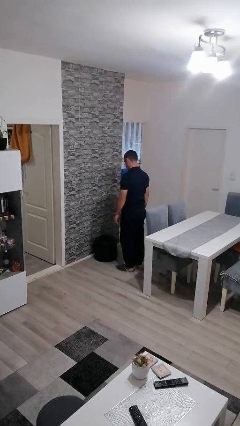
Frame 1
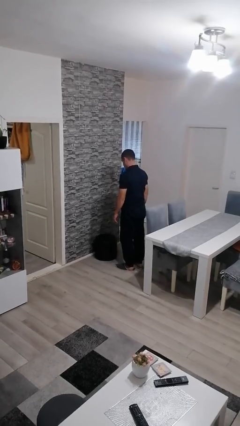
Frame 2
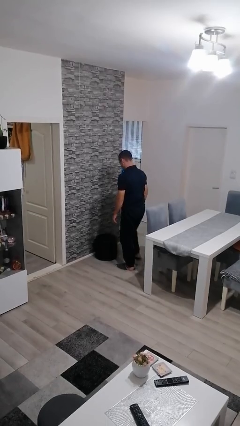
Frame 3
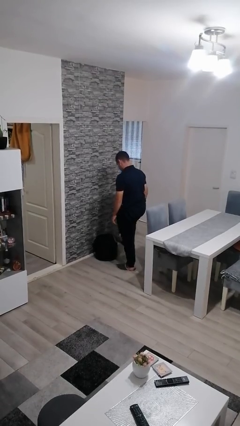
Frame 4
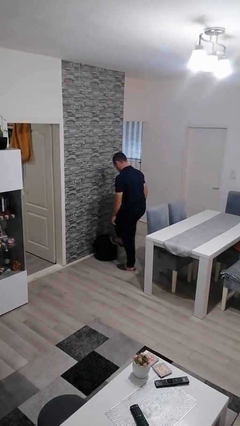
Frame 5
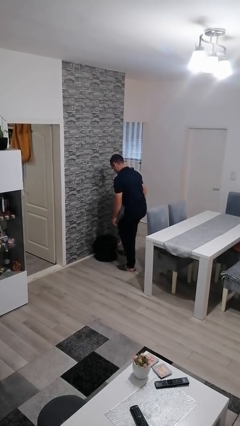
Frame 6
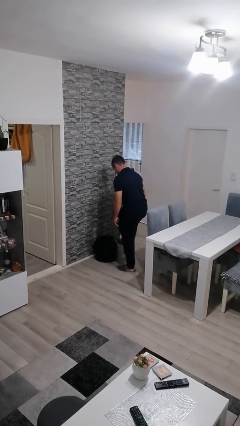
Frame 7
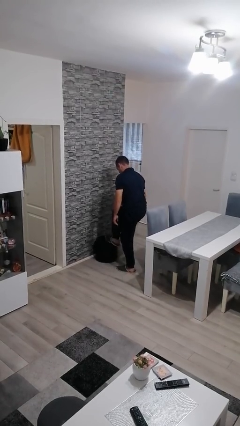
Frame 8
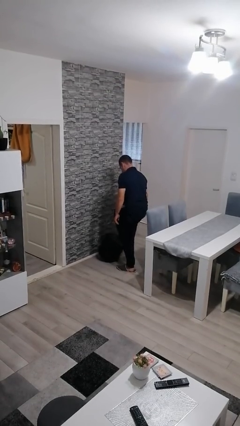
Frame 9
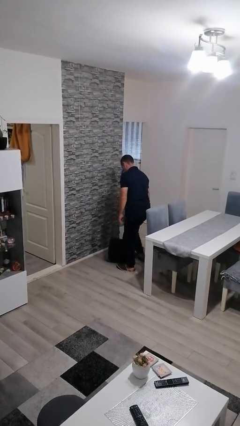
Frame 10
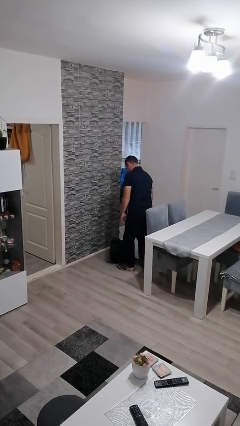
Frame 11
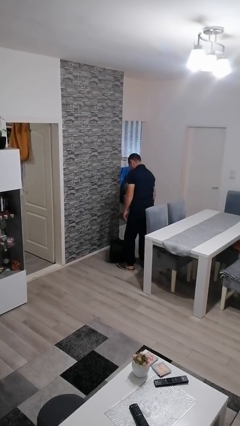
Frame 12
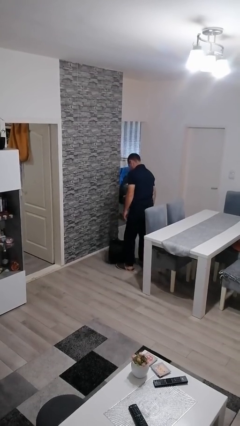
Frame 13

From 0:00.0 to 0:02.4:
person knocks over furniture

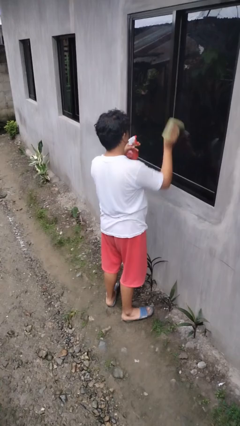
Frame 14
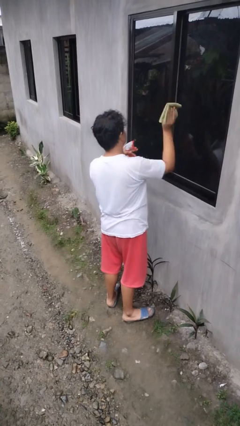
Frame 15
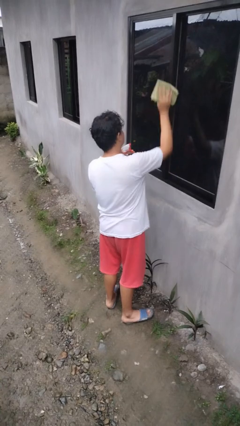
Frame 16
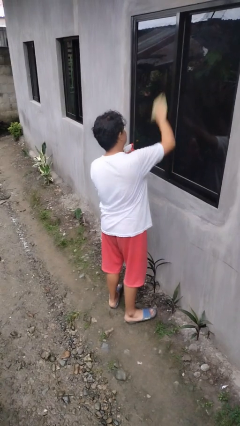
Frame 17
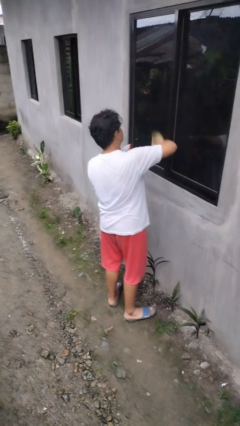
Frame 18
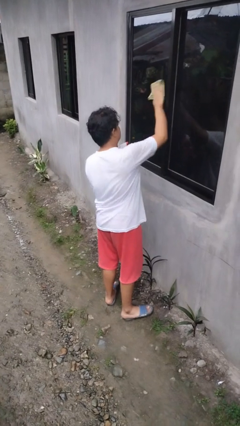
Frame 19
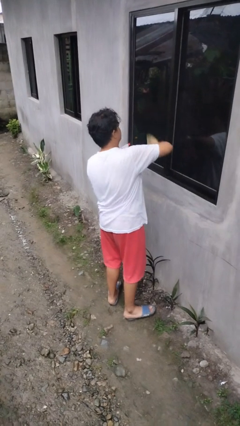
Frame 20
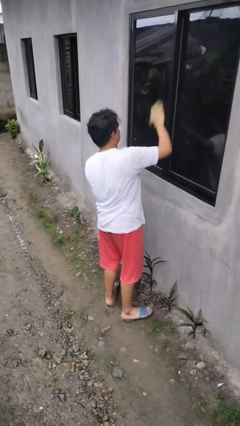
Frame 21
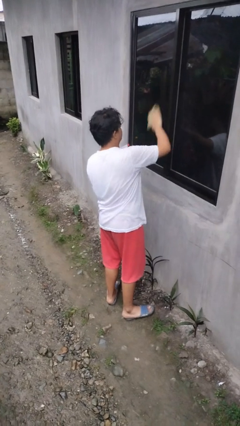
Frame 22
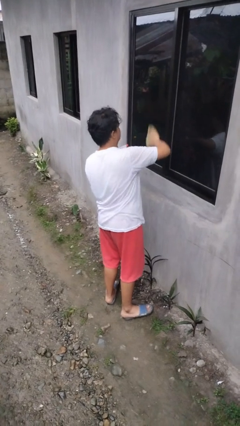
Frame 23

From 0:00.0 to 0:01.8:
person washes window

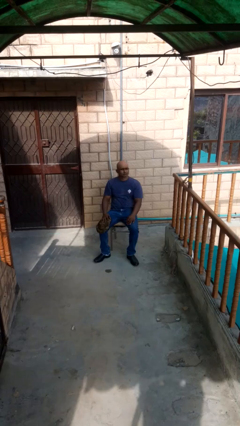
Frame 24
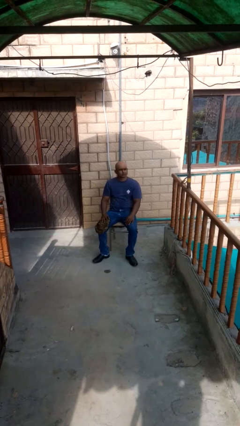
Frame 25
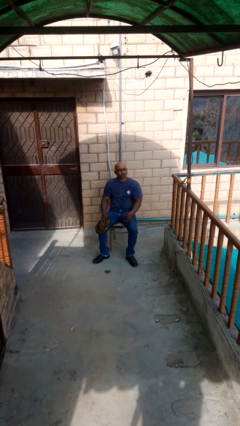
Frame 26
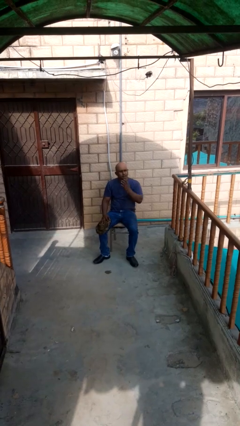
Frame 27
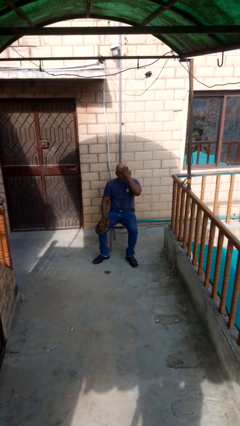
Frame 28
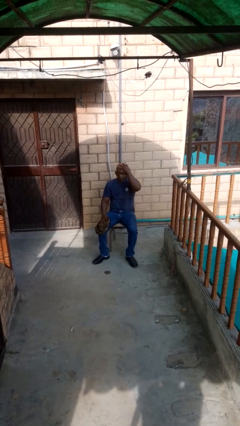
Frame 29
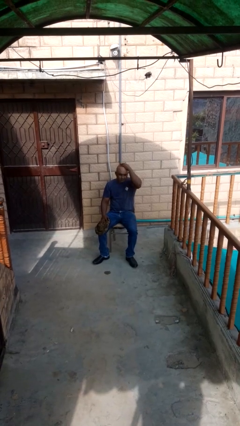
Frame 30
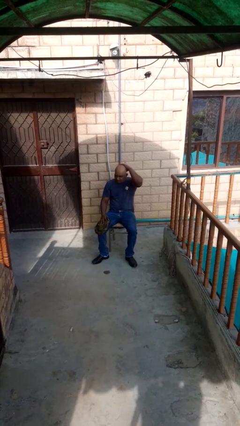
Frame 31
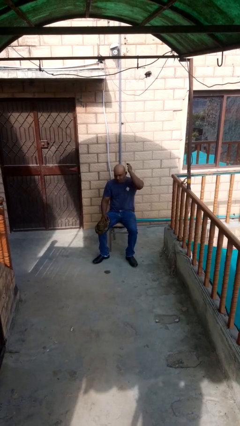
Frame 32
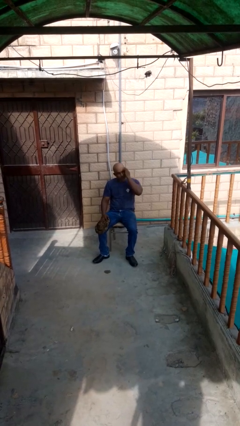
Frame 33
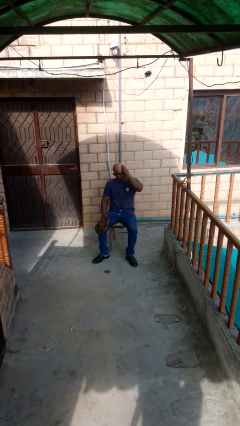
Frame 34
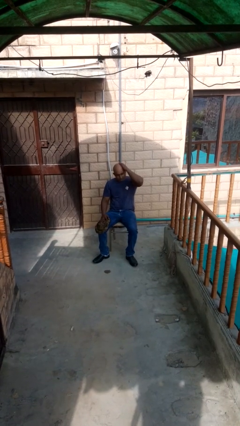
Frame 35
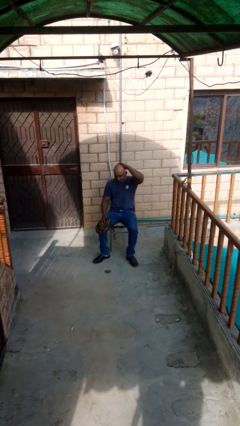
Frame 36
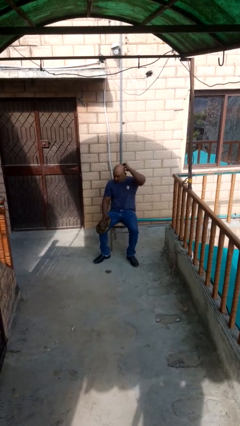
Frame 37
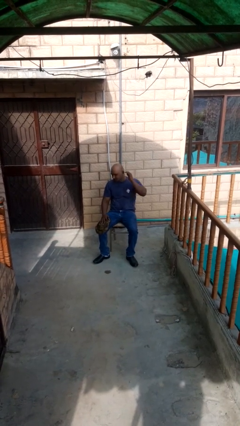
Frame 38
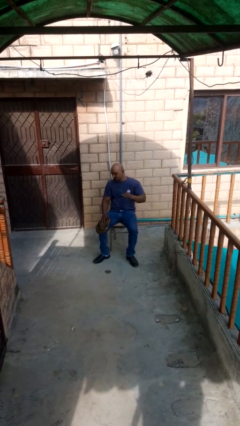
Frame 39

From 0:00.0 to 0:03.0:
person strokes hair

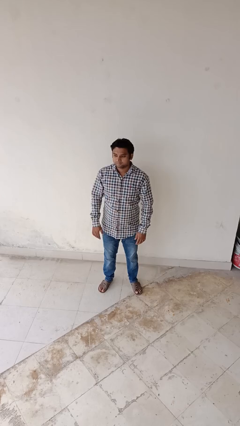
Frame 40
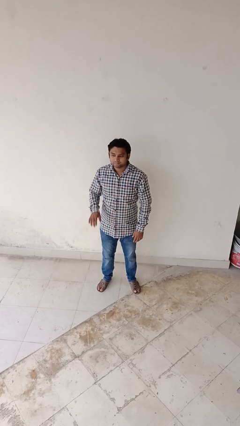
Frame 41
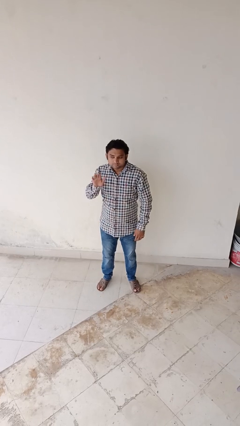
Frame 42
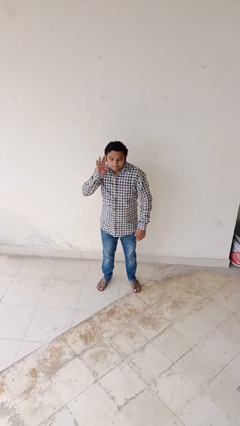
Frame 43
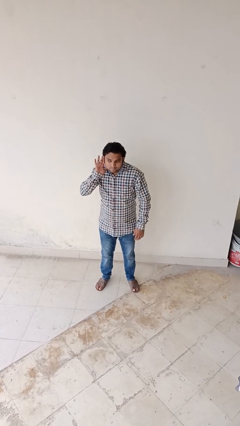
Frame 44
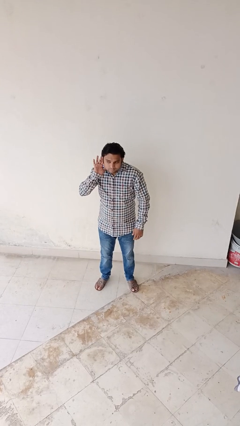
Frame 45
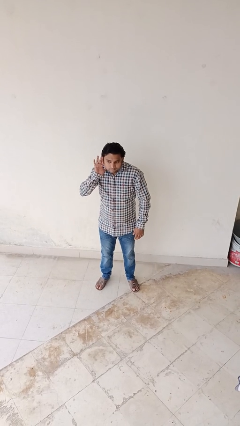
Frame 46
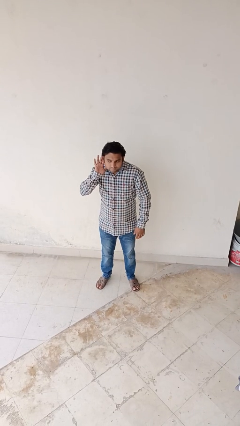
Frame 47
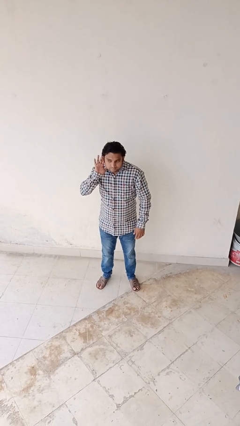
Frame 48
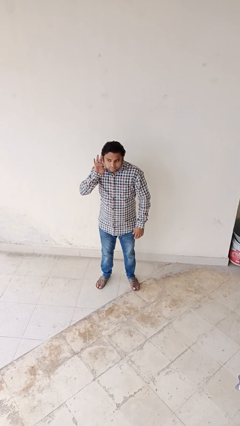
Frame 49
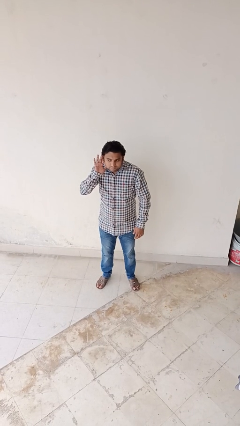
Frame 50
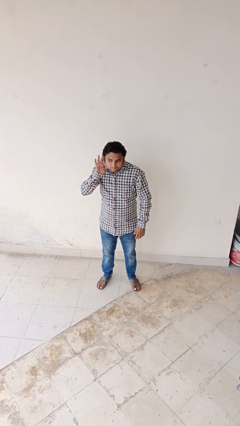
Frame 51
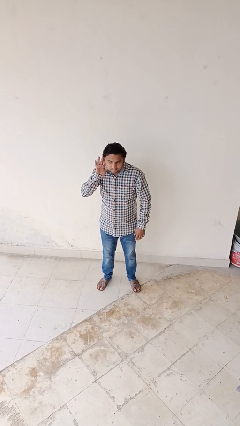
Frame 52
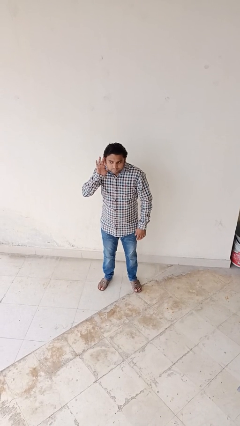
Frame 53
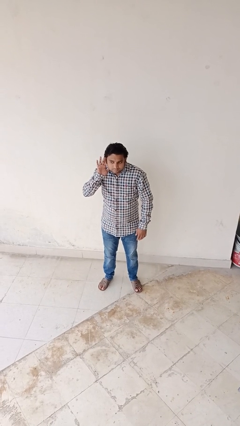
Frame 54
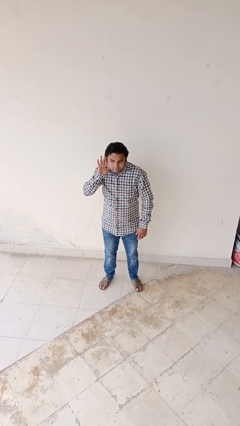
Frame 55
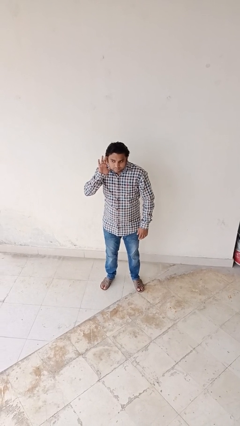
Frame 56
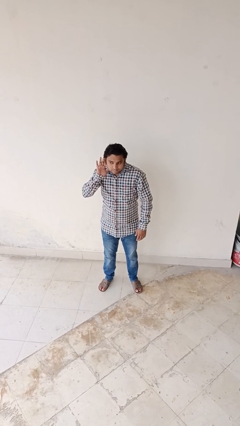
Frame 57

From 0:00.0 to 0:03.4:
person gestures listen closely

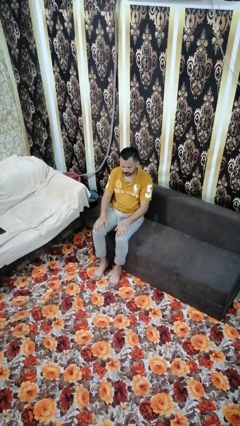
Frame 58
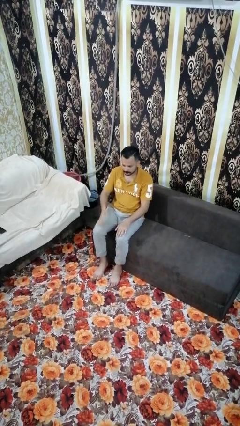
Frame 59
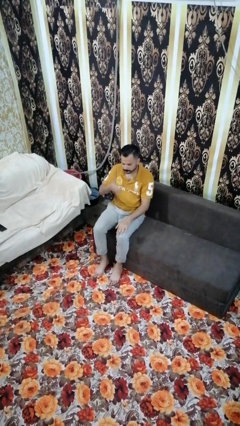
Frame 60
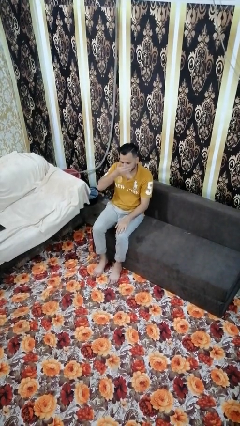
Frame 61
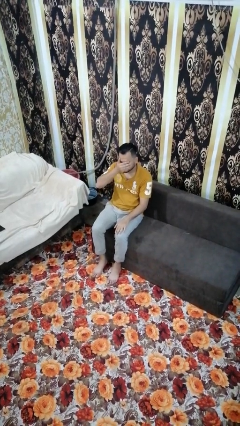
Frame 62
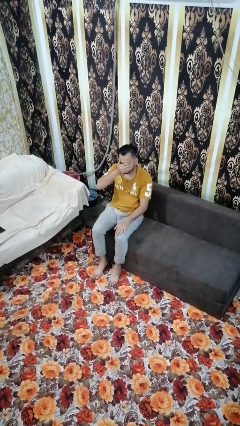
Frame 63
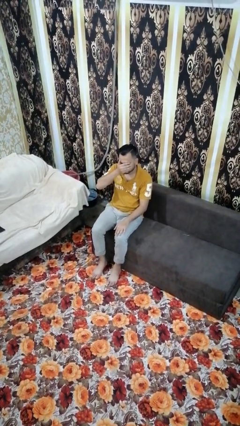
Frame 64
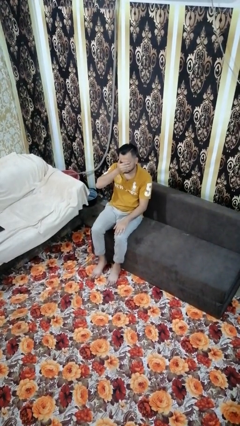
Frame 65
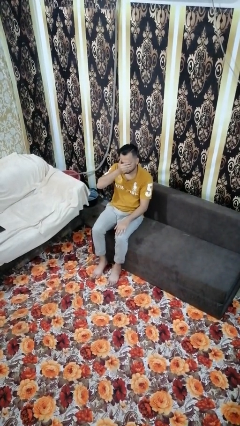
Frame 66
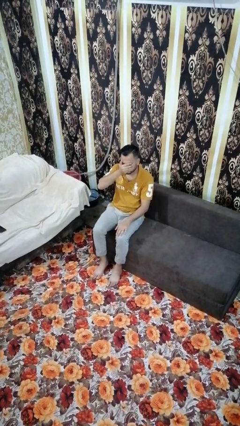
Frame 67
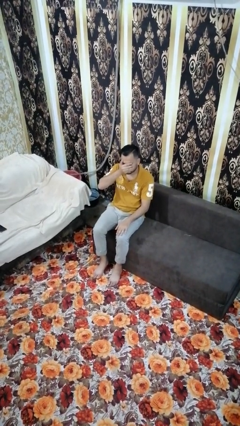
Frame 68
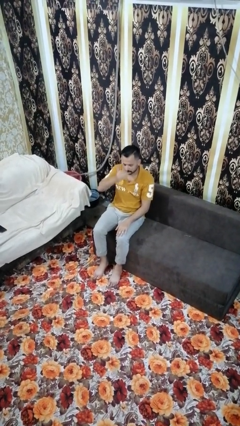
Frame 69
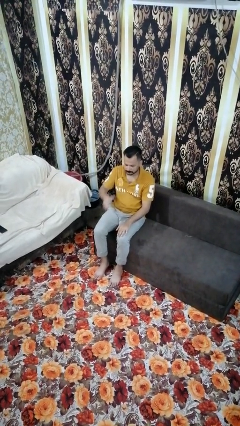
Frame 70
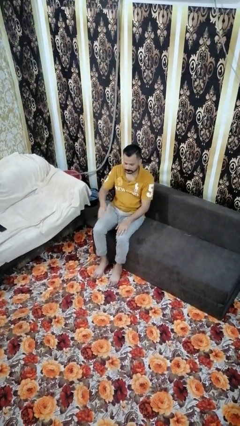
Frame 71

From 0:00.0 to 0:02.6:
person covers face with hands

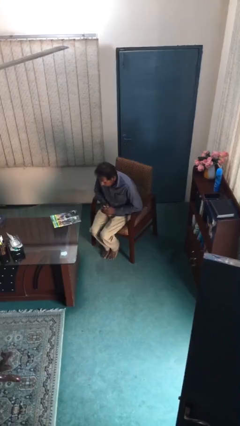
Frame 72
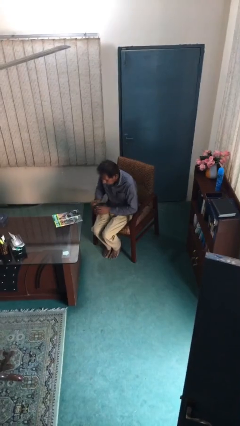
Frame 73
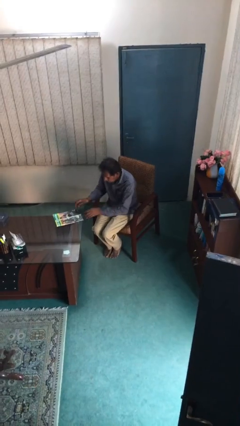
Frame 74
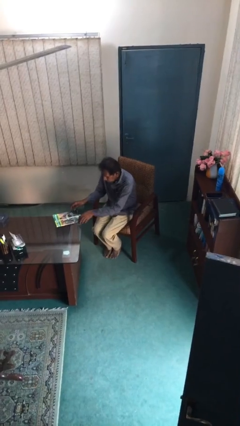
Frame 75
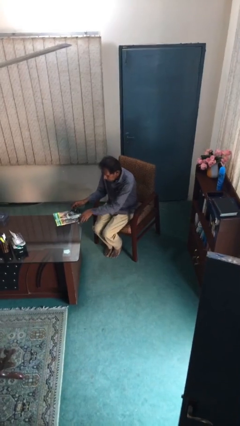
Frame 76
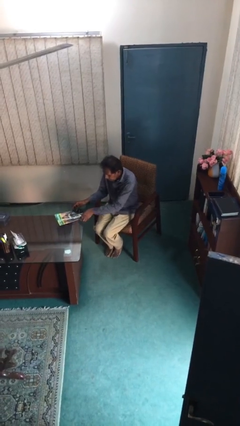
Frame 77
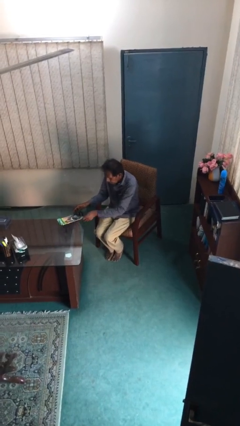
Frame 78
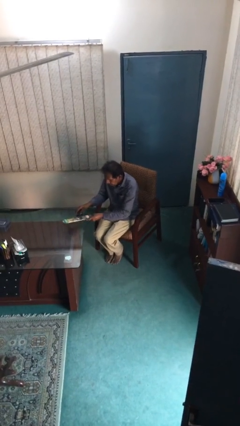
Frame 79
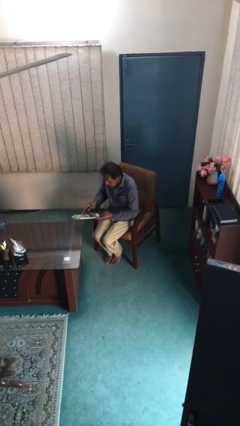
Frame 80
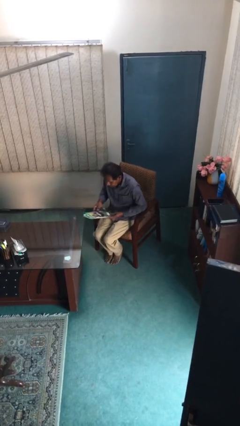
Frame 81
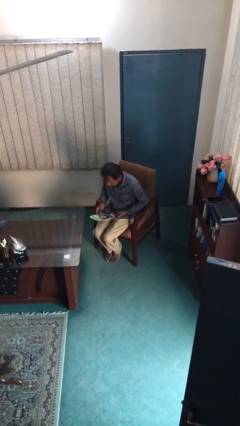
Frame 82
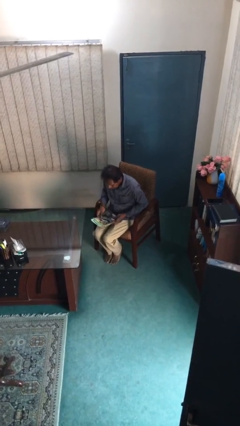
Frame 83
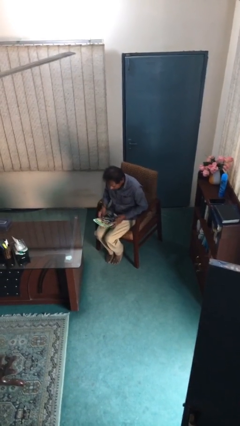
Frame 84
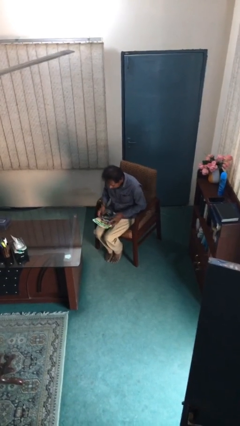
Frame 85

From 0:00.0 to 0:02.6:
person picks up object from table

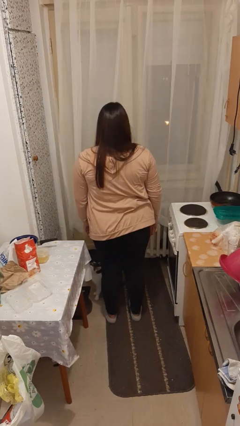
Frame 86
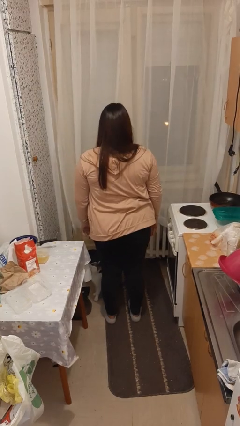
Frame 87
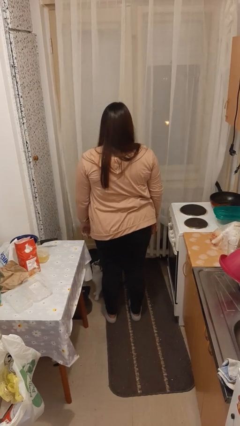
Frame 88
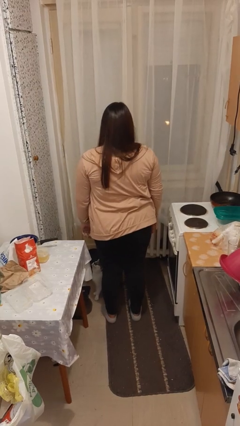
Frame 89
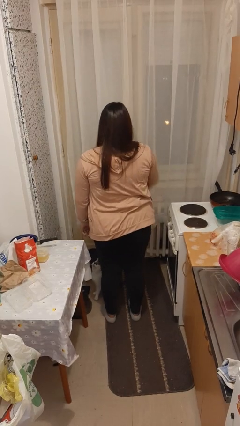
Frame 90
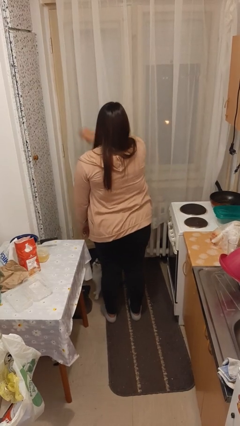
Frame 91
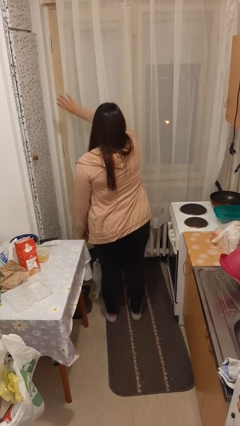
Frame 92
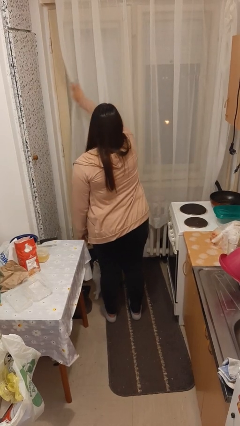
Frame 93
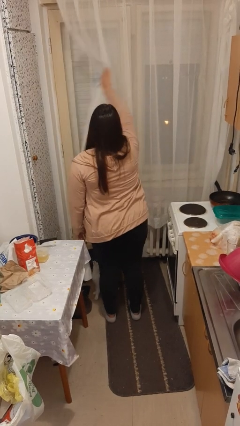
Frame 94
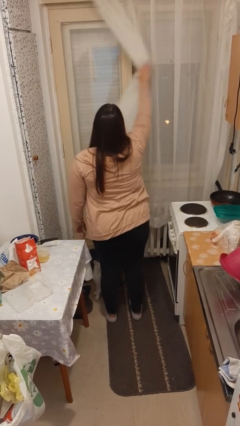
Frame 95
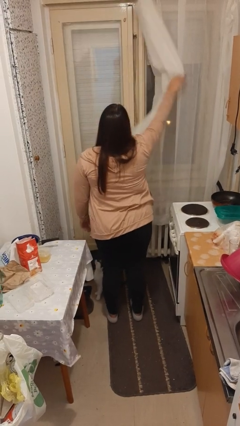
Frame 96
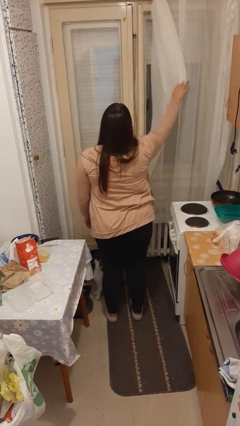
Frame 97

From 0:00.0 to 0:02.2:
person opens curtains
